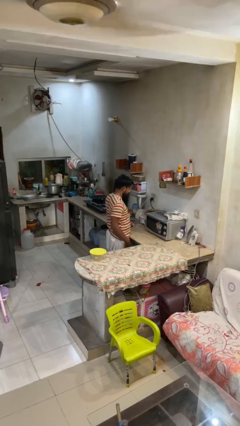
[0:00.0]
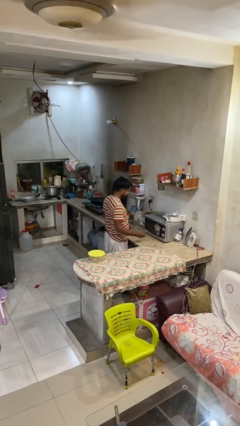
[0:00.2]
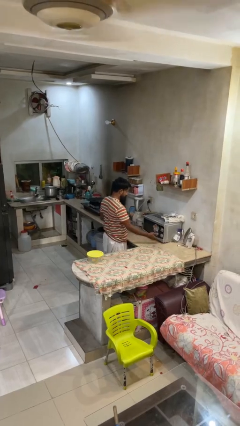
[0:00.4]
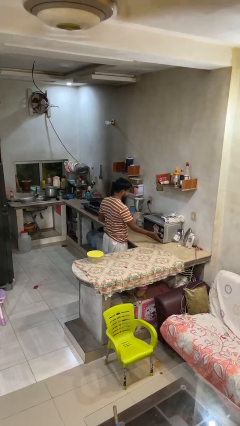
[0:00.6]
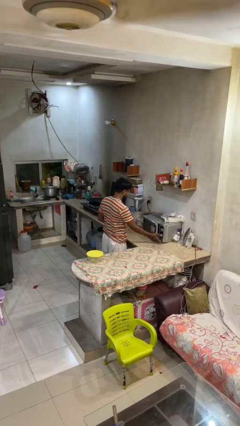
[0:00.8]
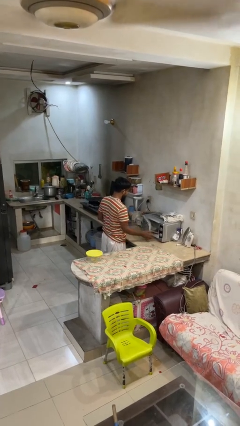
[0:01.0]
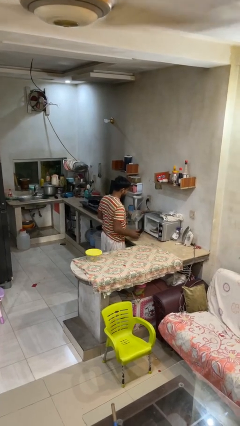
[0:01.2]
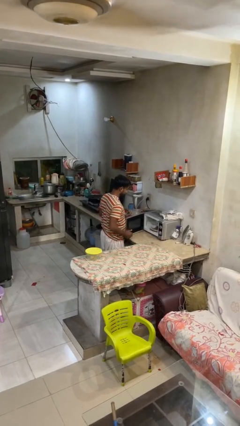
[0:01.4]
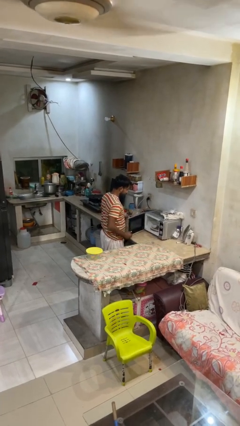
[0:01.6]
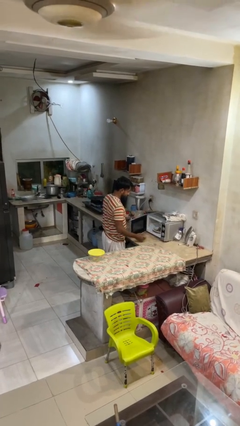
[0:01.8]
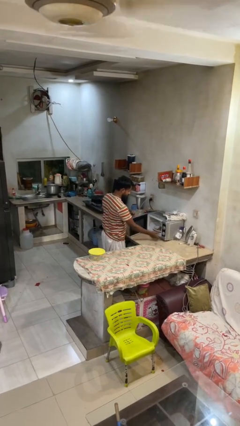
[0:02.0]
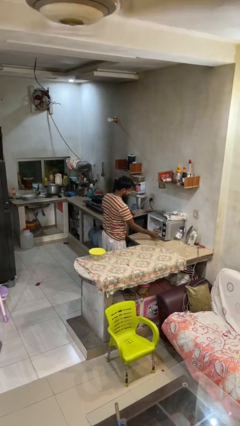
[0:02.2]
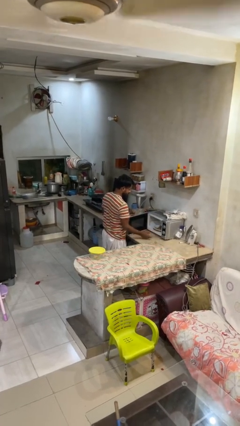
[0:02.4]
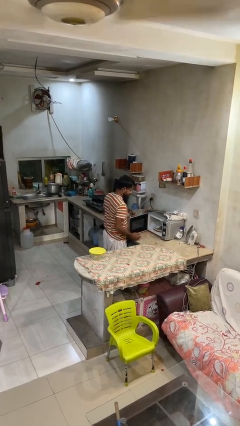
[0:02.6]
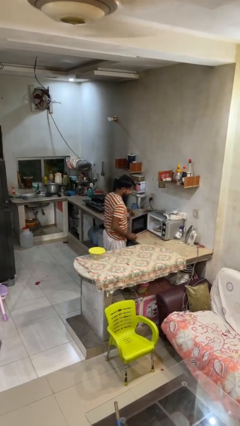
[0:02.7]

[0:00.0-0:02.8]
person opens microwave

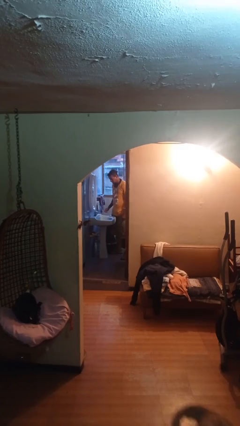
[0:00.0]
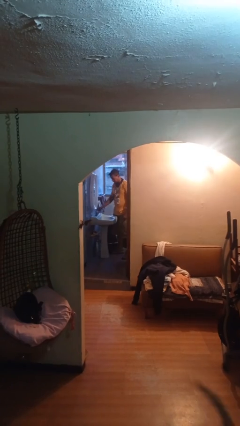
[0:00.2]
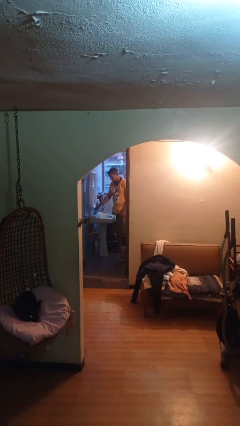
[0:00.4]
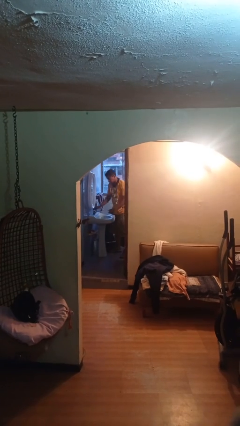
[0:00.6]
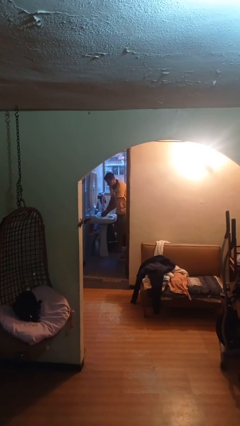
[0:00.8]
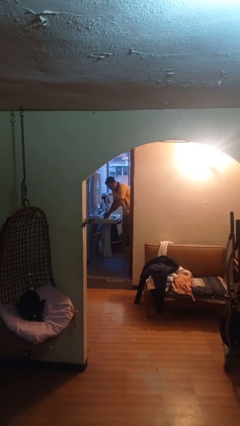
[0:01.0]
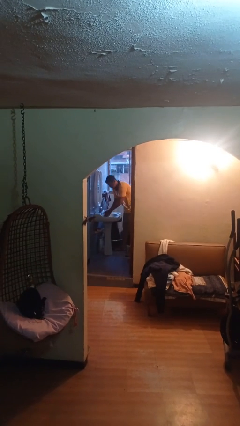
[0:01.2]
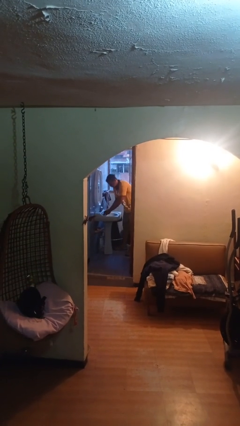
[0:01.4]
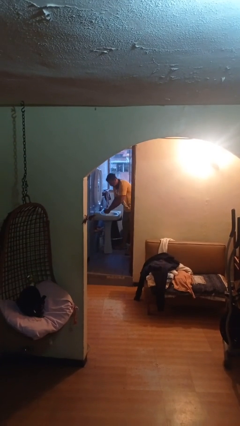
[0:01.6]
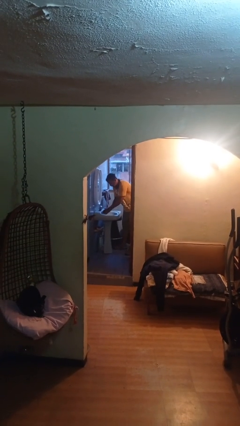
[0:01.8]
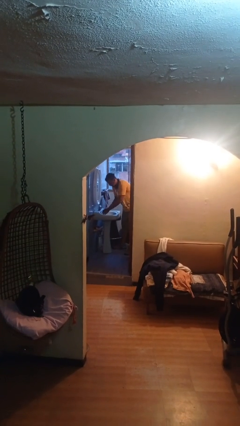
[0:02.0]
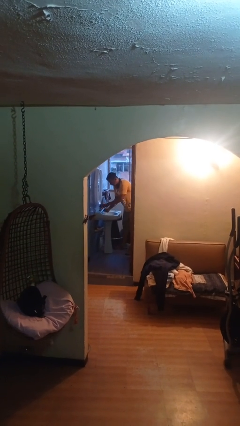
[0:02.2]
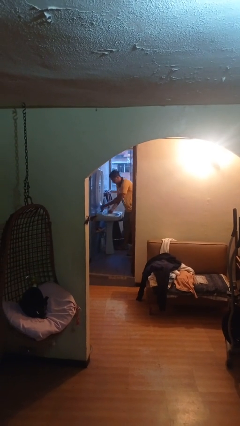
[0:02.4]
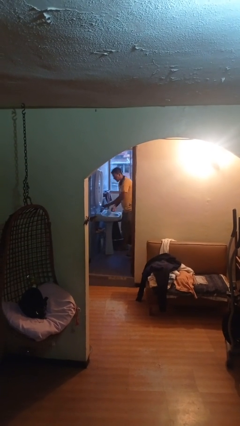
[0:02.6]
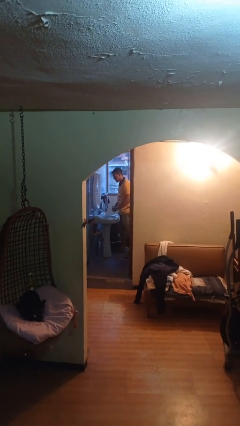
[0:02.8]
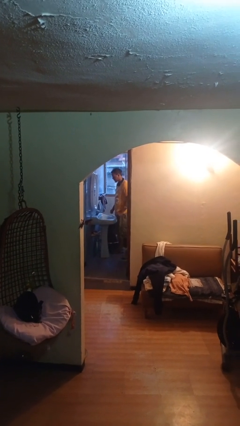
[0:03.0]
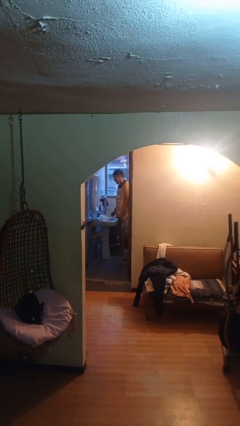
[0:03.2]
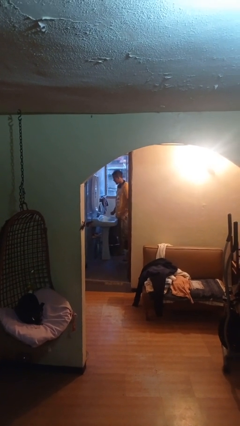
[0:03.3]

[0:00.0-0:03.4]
person washes hands

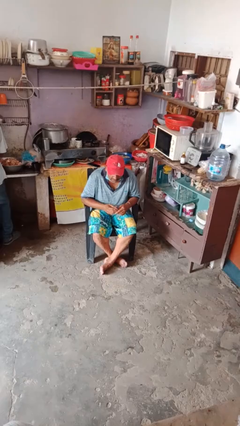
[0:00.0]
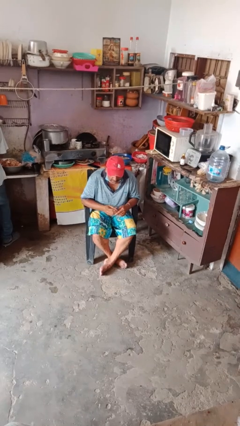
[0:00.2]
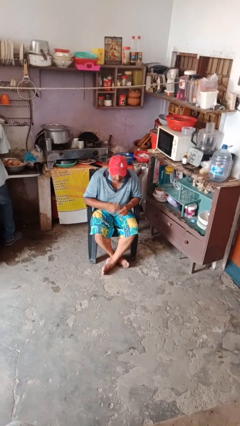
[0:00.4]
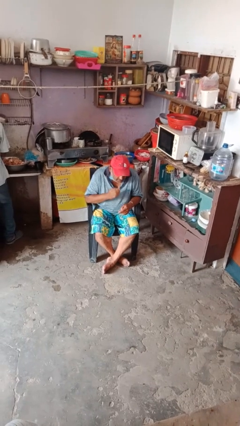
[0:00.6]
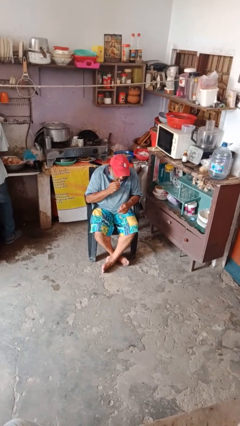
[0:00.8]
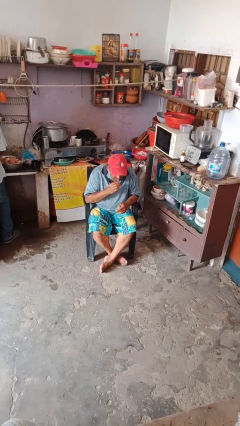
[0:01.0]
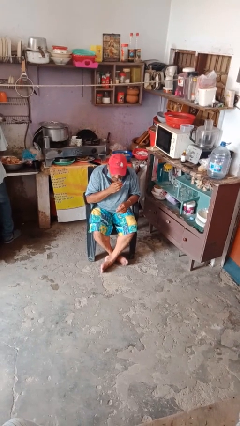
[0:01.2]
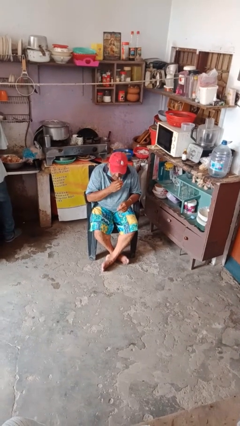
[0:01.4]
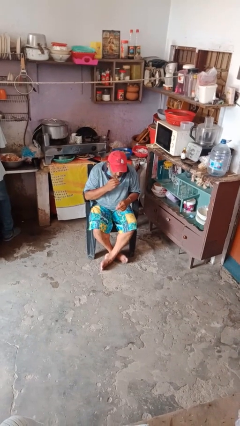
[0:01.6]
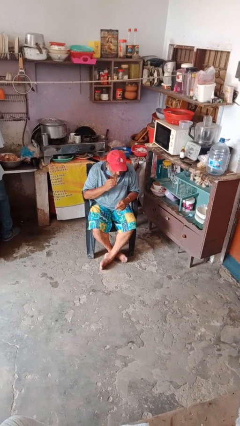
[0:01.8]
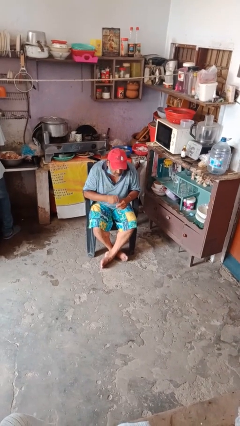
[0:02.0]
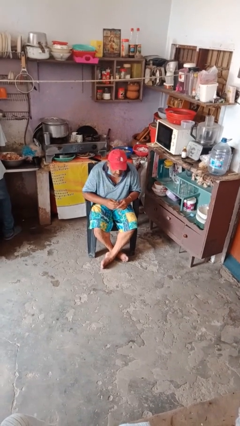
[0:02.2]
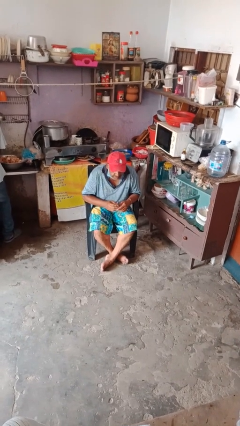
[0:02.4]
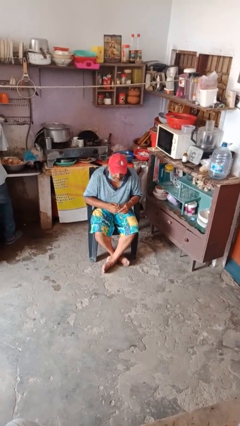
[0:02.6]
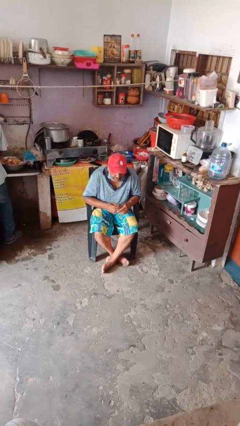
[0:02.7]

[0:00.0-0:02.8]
person applies lip makeup

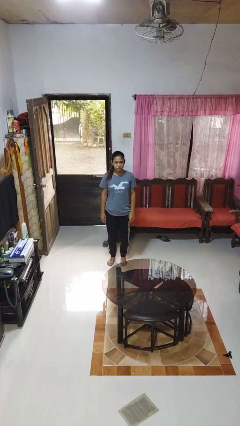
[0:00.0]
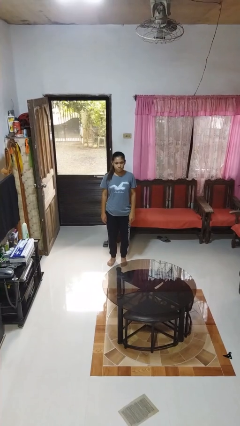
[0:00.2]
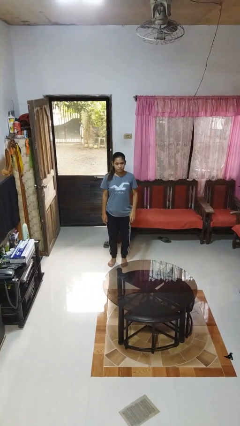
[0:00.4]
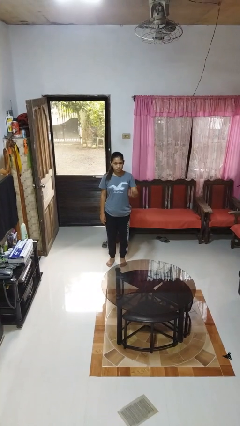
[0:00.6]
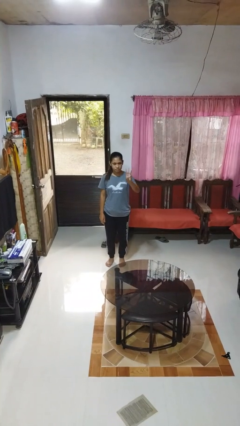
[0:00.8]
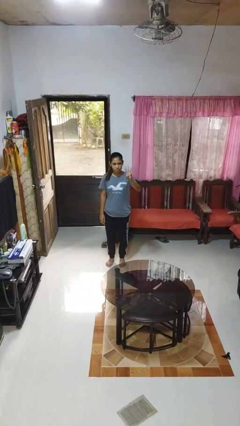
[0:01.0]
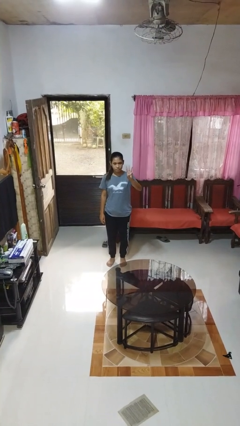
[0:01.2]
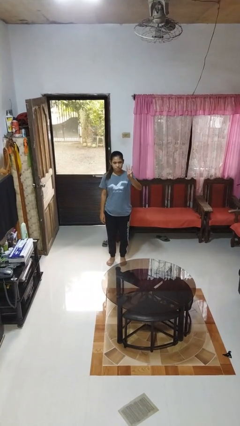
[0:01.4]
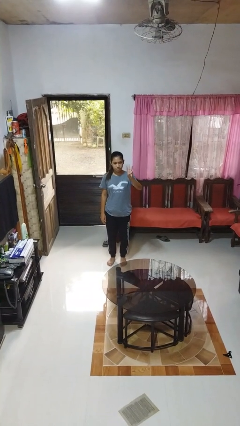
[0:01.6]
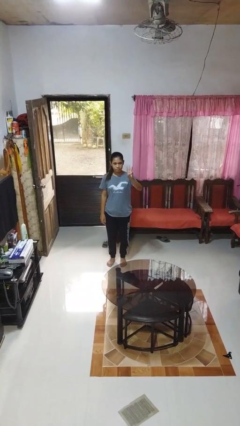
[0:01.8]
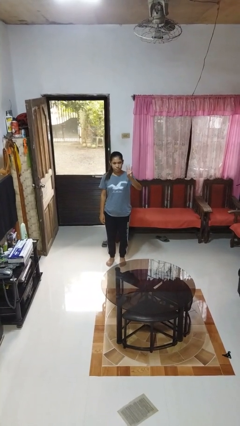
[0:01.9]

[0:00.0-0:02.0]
person gestures number three

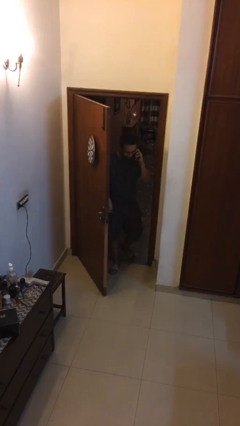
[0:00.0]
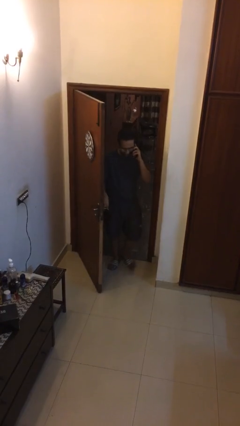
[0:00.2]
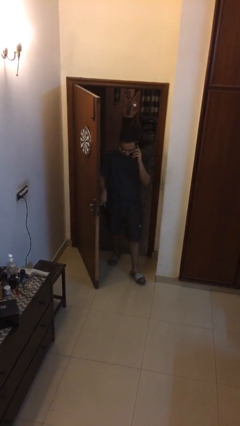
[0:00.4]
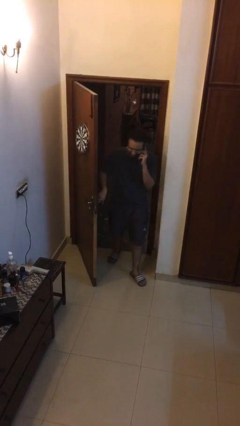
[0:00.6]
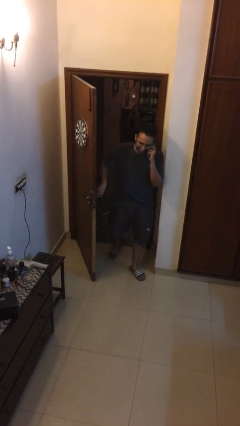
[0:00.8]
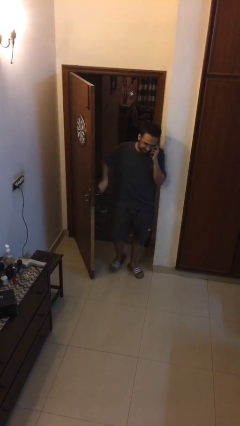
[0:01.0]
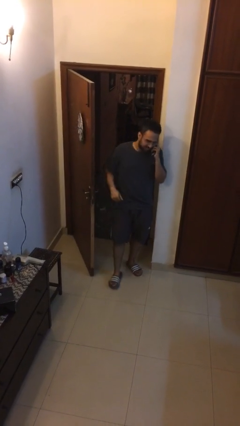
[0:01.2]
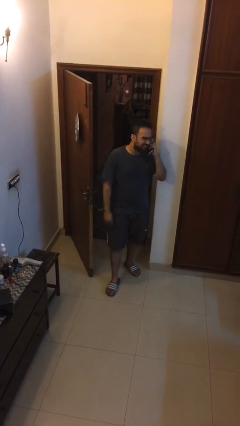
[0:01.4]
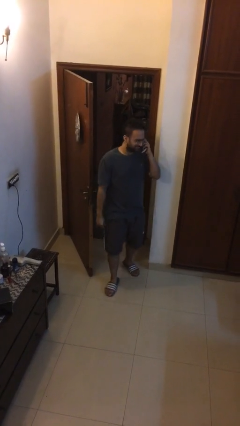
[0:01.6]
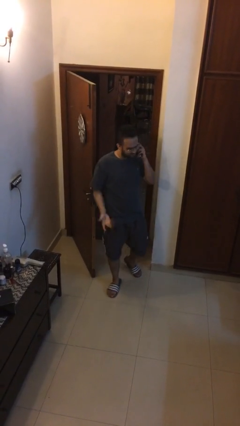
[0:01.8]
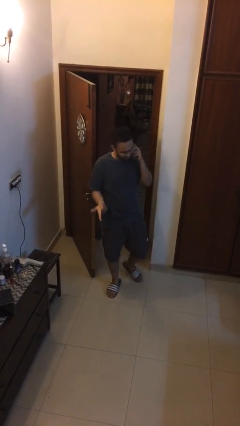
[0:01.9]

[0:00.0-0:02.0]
person enters scene through structure

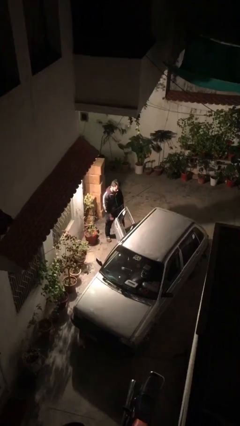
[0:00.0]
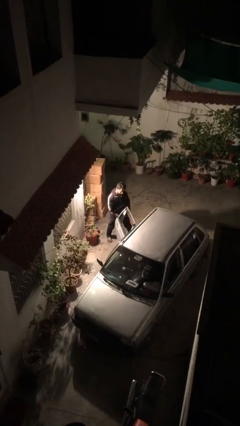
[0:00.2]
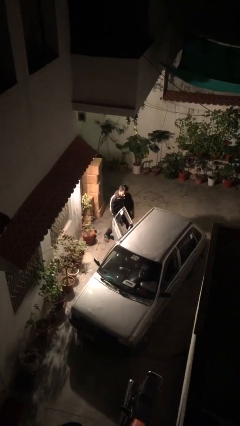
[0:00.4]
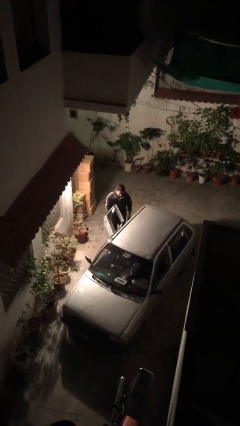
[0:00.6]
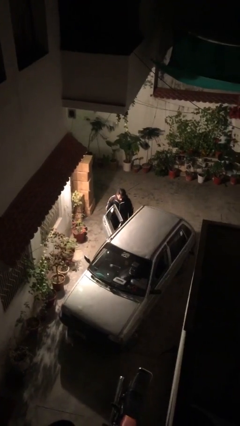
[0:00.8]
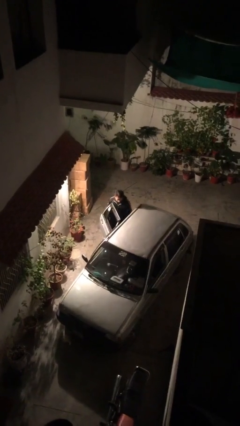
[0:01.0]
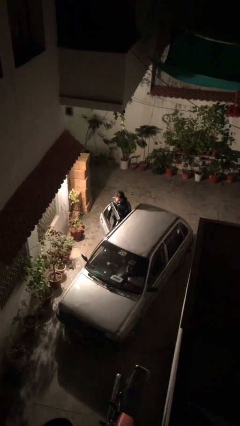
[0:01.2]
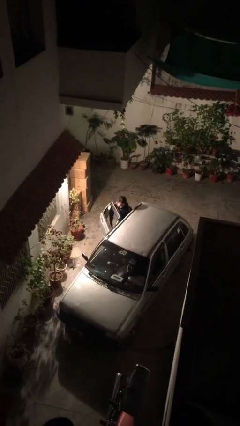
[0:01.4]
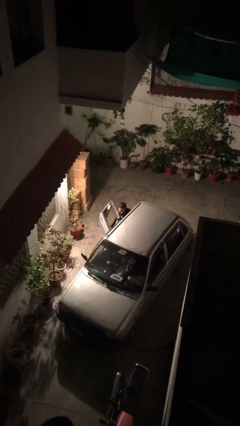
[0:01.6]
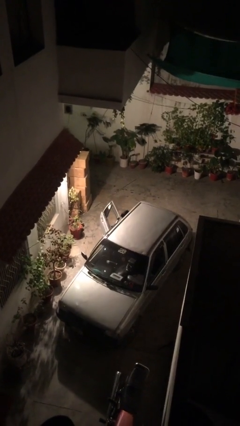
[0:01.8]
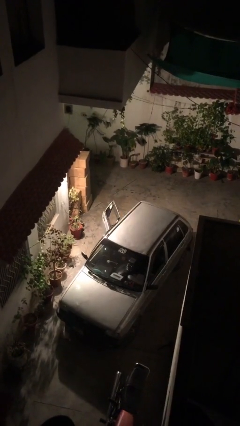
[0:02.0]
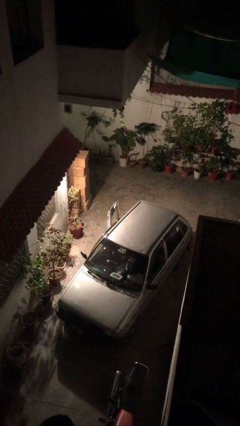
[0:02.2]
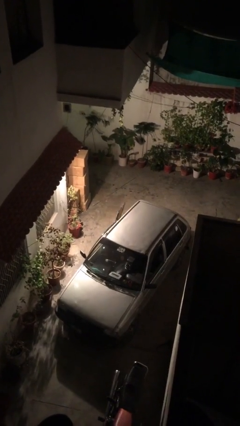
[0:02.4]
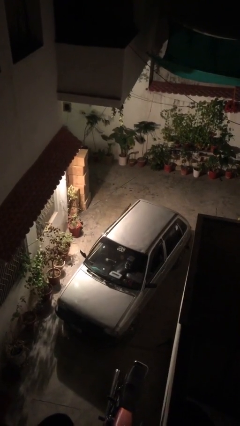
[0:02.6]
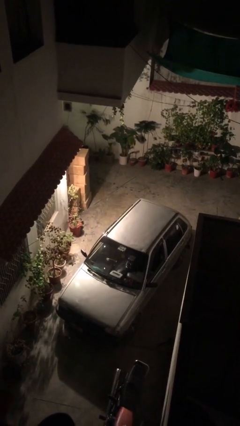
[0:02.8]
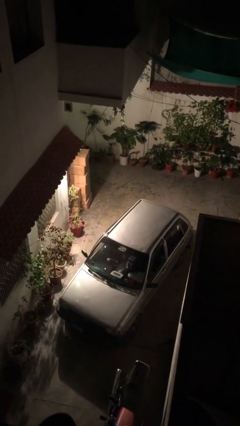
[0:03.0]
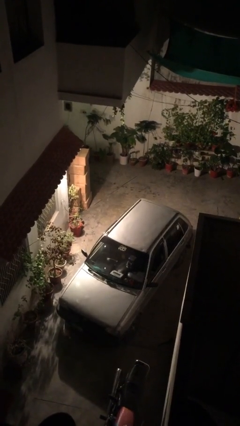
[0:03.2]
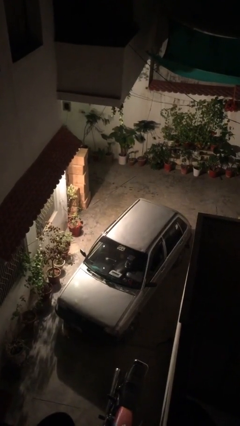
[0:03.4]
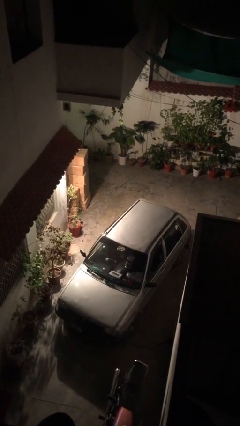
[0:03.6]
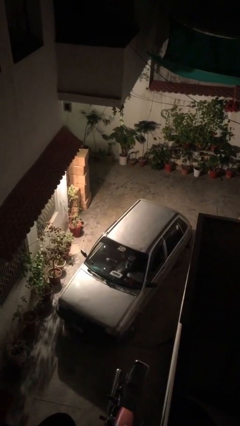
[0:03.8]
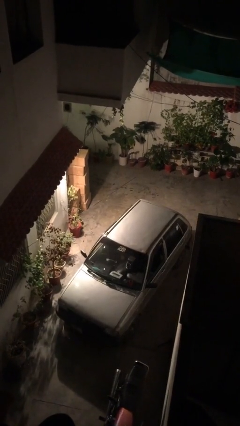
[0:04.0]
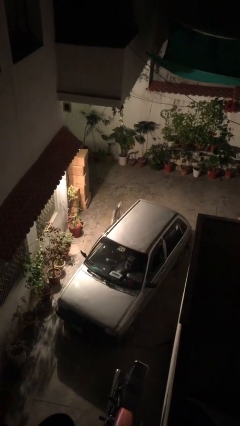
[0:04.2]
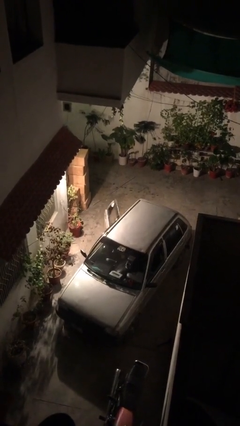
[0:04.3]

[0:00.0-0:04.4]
person enters car
